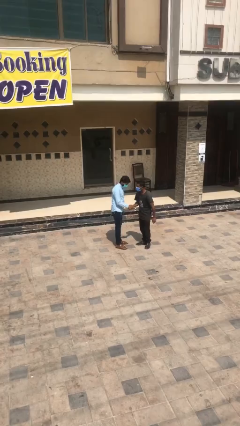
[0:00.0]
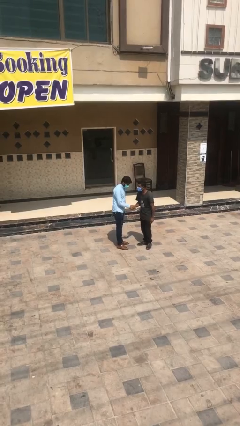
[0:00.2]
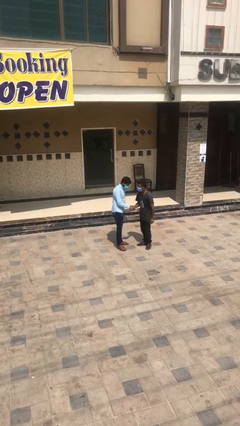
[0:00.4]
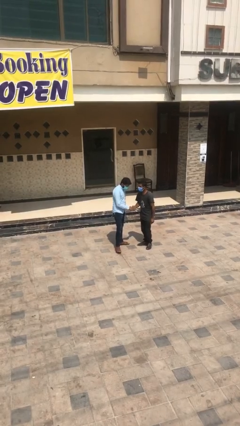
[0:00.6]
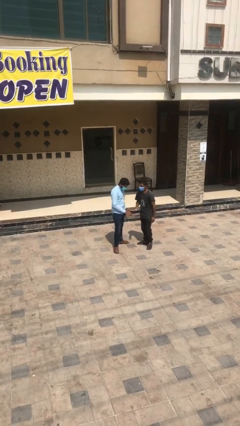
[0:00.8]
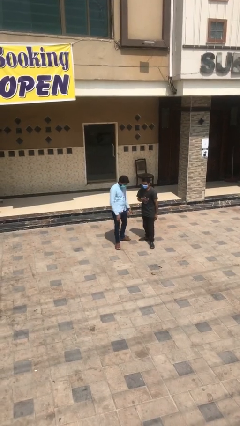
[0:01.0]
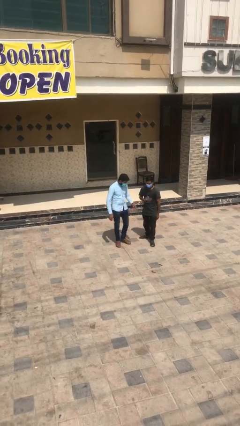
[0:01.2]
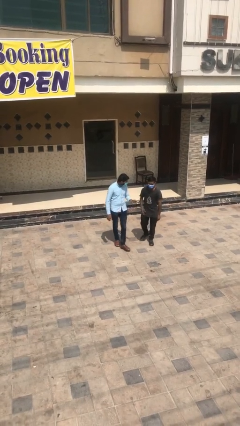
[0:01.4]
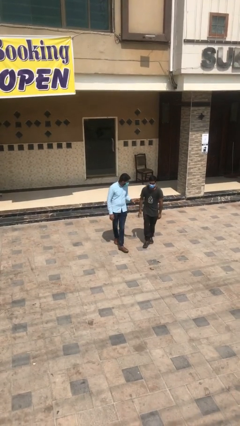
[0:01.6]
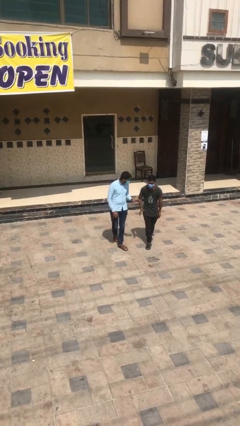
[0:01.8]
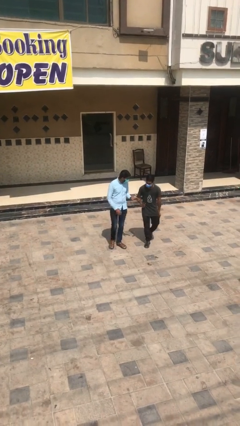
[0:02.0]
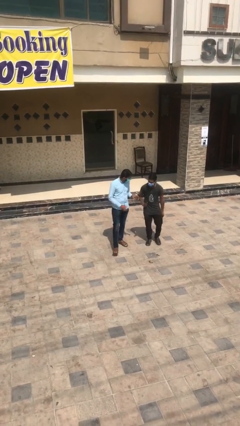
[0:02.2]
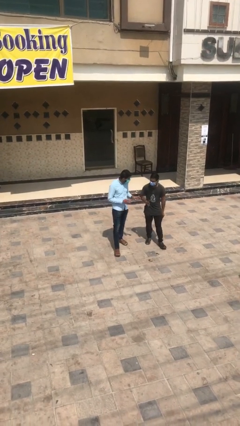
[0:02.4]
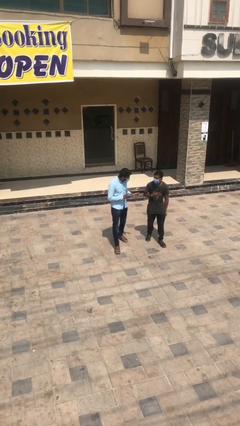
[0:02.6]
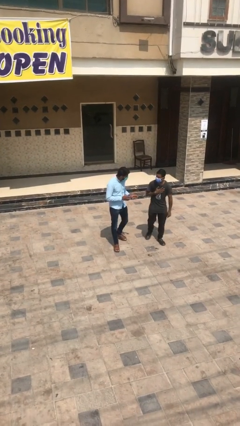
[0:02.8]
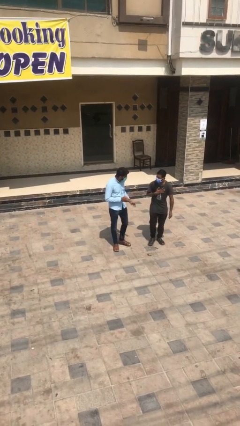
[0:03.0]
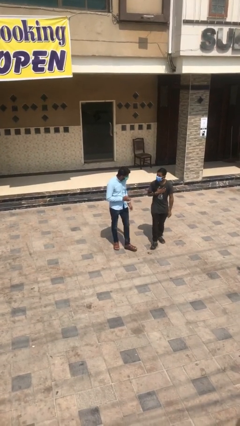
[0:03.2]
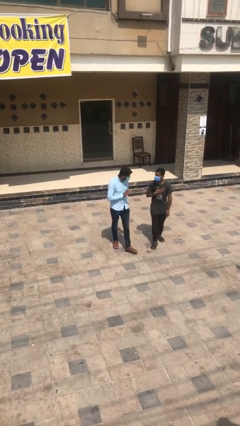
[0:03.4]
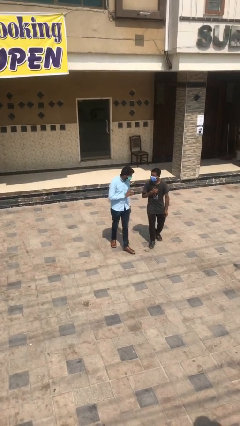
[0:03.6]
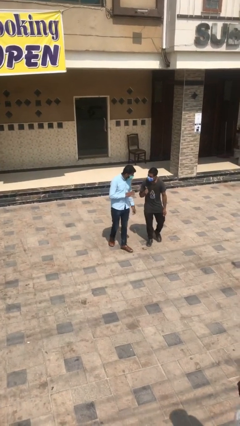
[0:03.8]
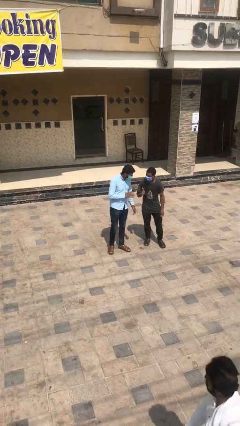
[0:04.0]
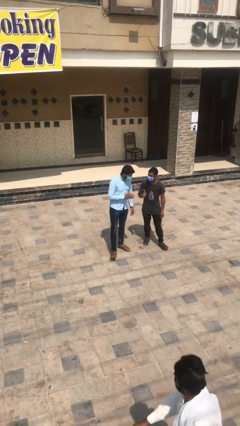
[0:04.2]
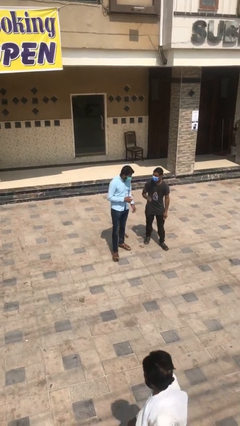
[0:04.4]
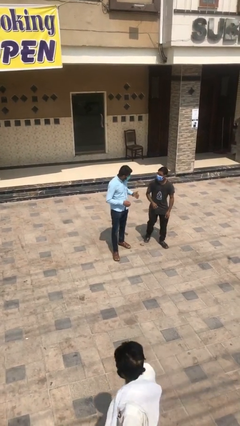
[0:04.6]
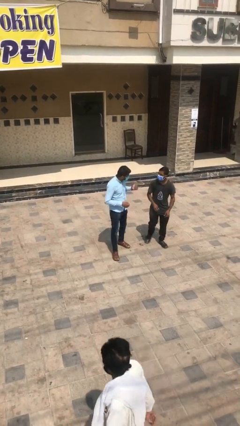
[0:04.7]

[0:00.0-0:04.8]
person talks to person

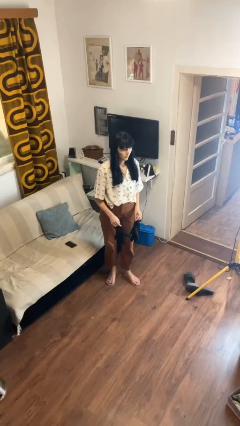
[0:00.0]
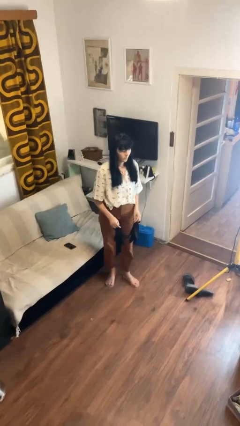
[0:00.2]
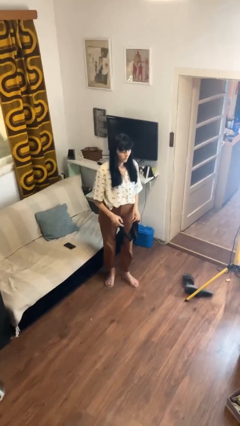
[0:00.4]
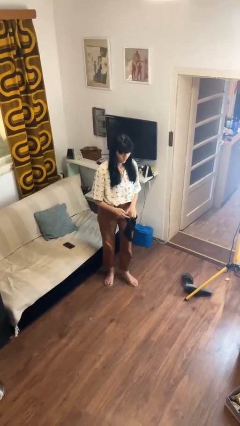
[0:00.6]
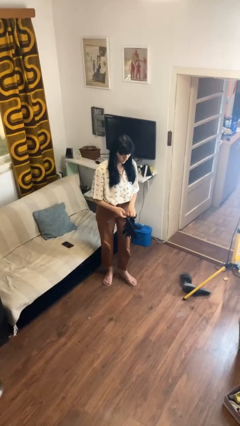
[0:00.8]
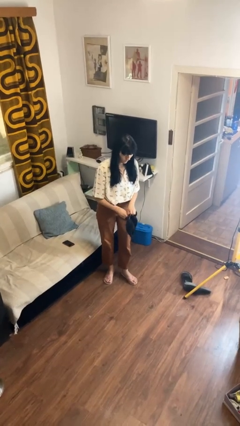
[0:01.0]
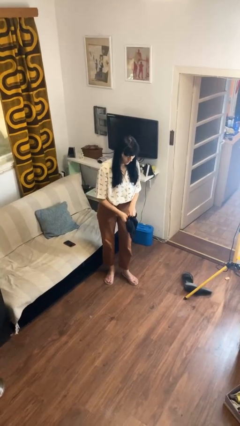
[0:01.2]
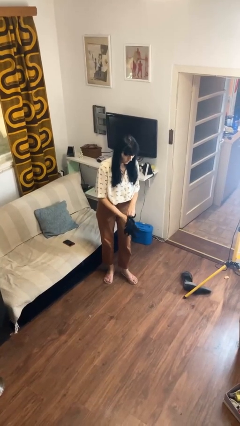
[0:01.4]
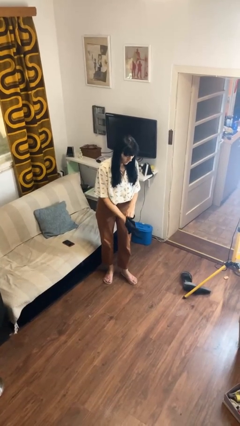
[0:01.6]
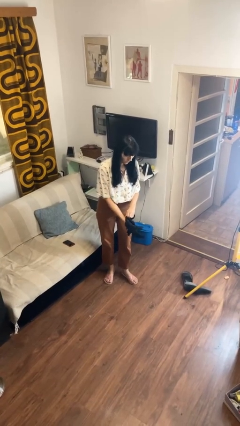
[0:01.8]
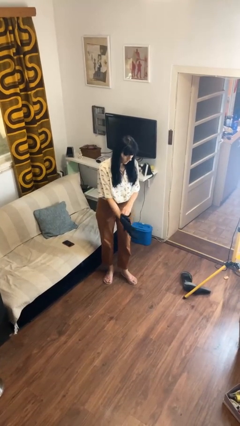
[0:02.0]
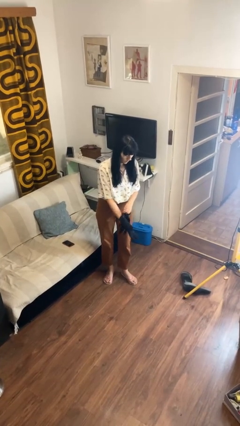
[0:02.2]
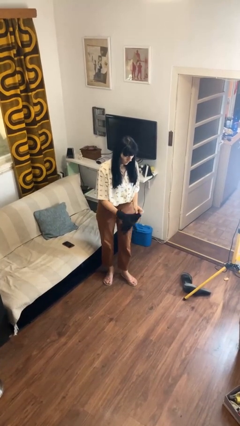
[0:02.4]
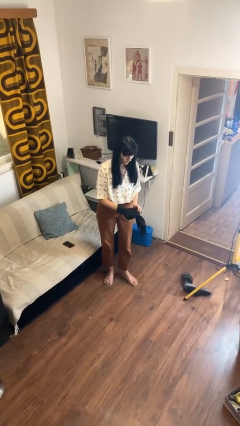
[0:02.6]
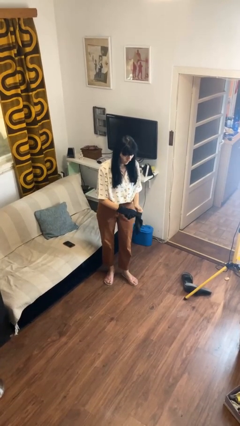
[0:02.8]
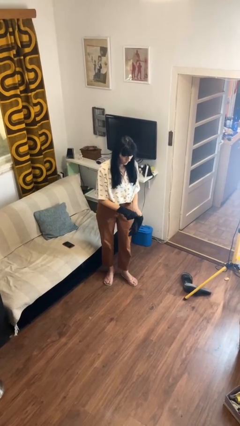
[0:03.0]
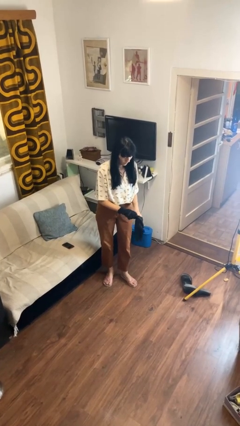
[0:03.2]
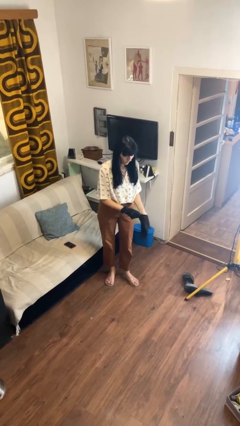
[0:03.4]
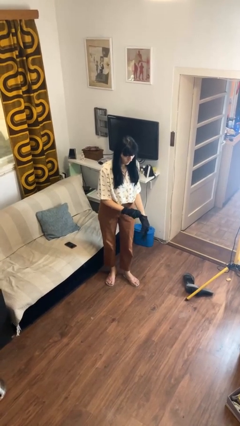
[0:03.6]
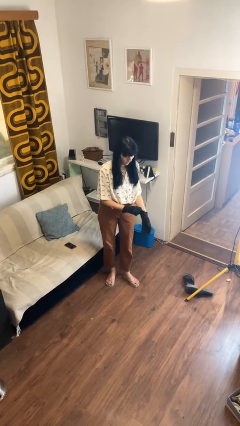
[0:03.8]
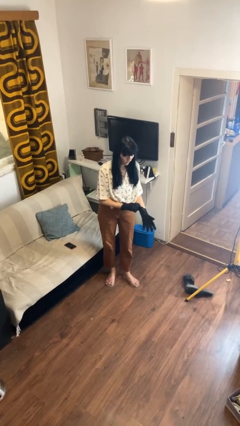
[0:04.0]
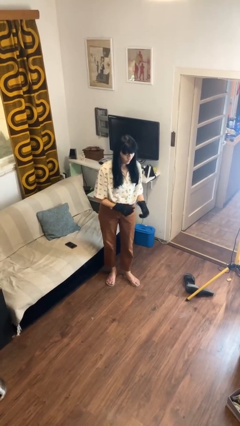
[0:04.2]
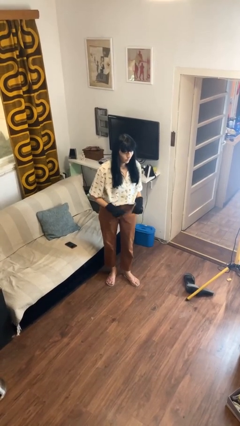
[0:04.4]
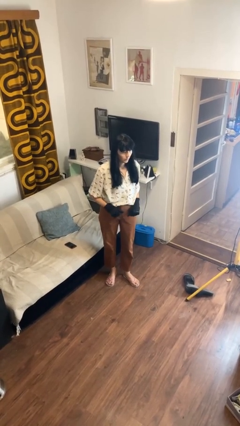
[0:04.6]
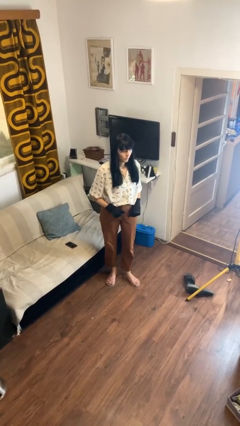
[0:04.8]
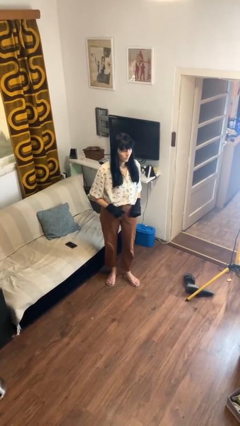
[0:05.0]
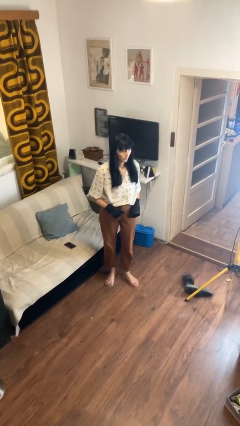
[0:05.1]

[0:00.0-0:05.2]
person puts on gloves

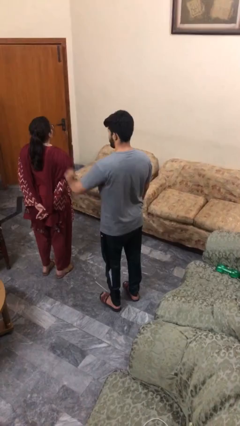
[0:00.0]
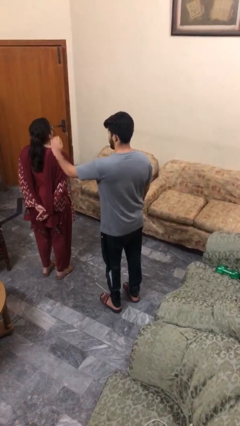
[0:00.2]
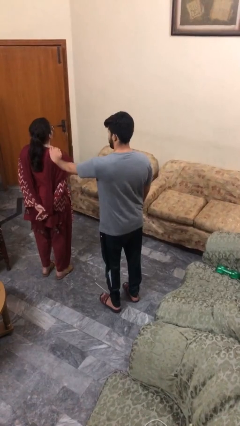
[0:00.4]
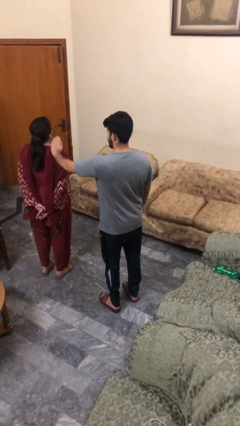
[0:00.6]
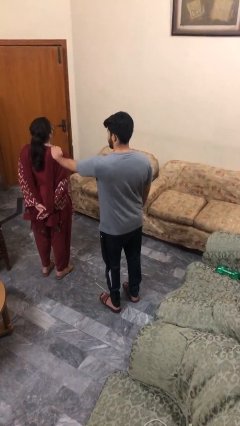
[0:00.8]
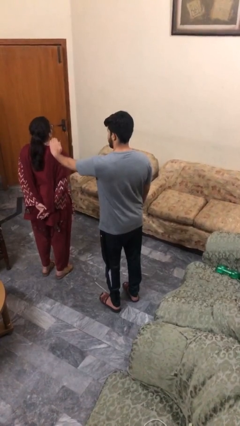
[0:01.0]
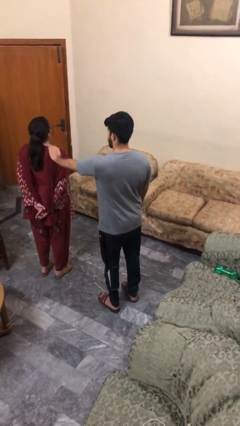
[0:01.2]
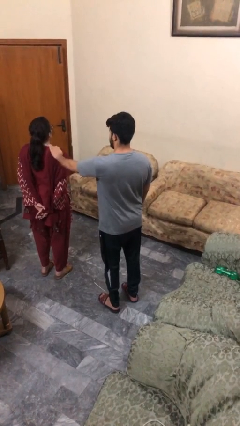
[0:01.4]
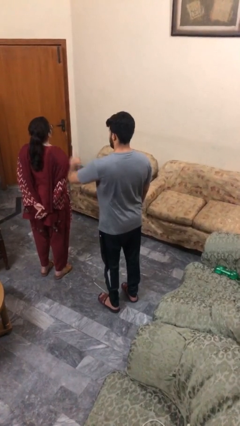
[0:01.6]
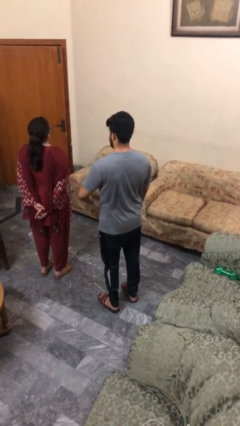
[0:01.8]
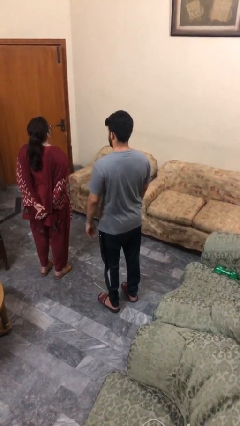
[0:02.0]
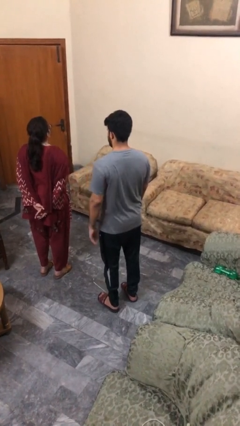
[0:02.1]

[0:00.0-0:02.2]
person pounds shoulders of person

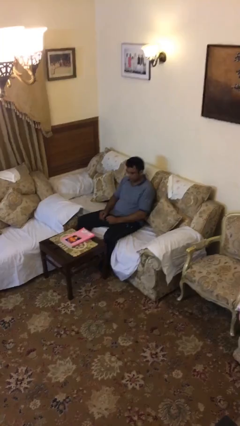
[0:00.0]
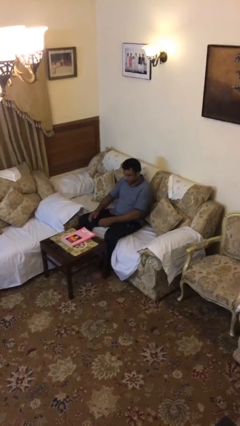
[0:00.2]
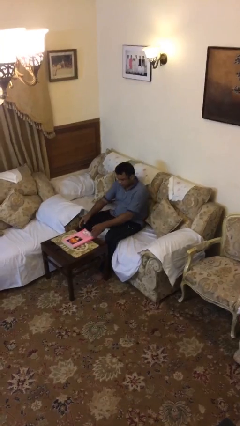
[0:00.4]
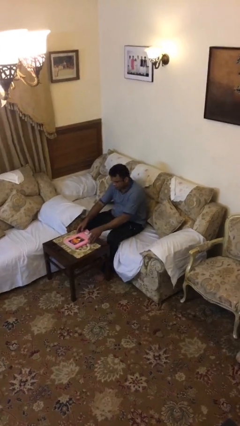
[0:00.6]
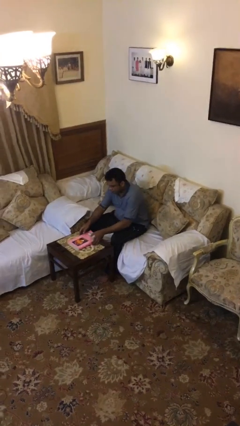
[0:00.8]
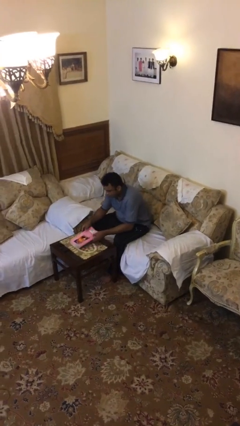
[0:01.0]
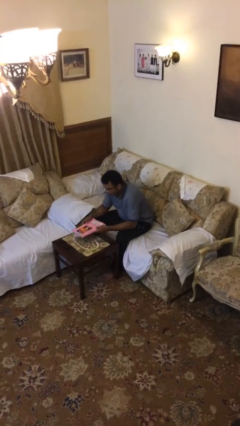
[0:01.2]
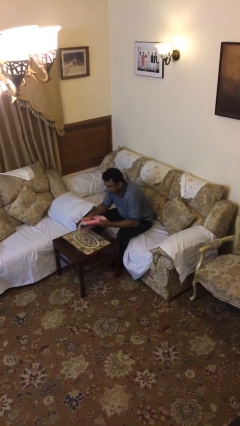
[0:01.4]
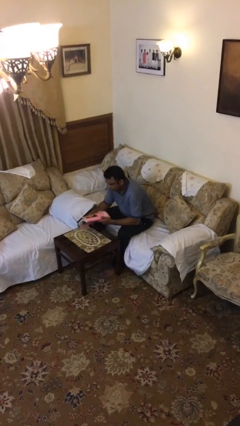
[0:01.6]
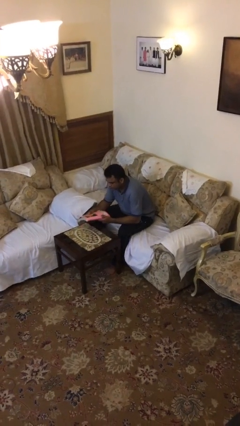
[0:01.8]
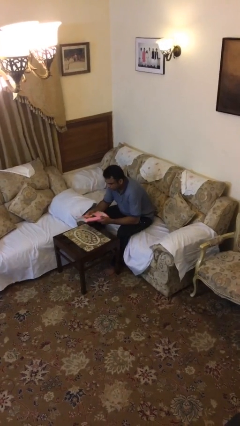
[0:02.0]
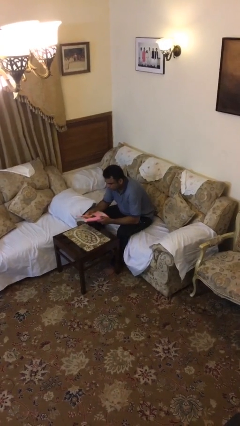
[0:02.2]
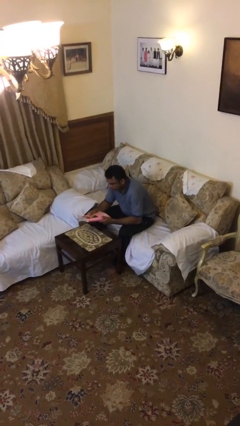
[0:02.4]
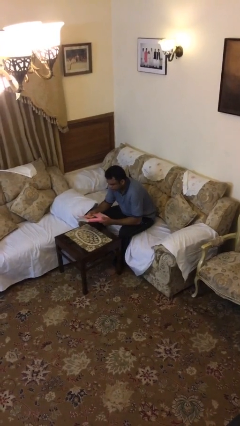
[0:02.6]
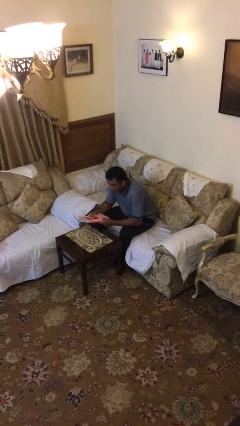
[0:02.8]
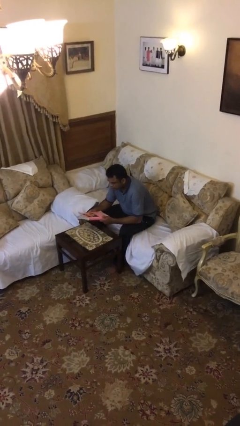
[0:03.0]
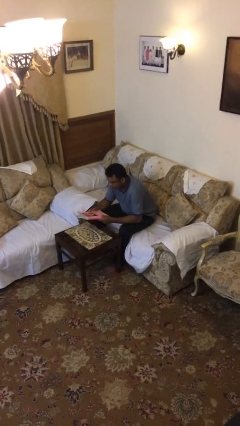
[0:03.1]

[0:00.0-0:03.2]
person picks up object from table

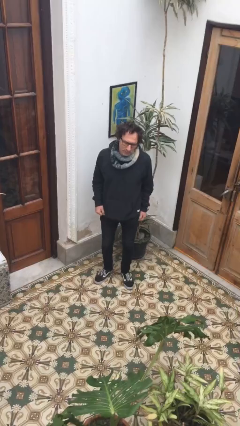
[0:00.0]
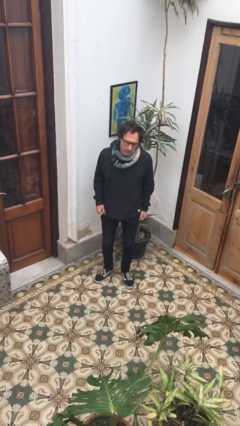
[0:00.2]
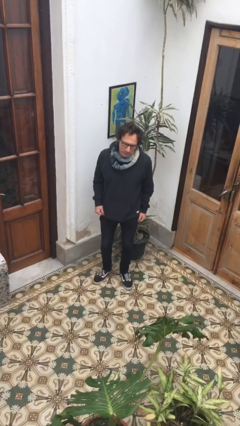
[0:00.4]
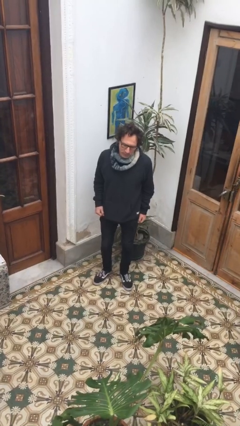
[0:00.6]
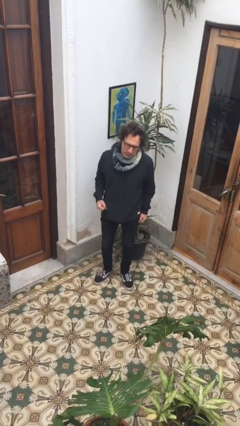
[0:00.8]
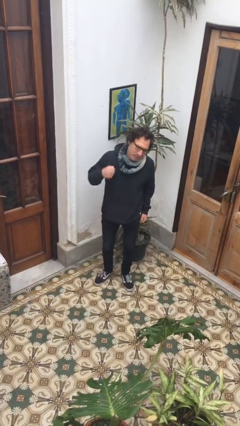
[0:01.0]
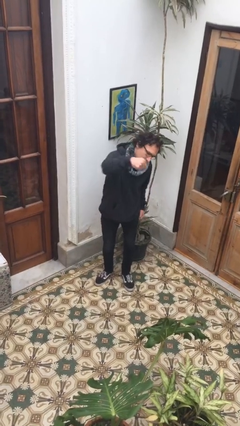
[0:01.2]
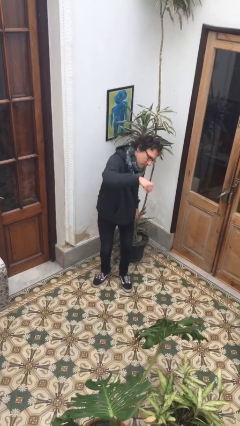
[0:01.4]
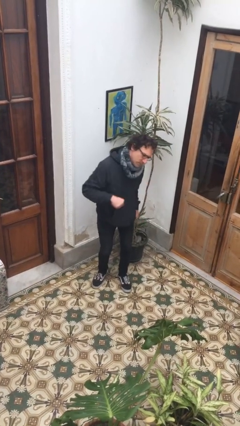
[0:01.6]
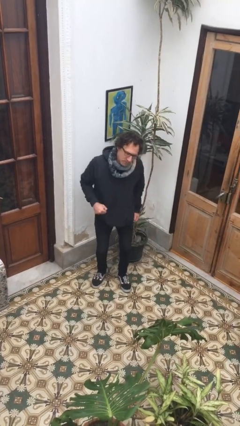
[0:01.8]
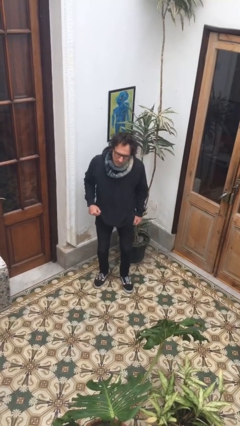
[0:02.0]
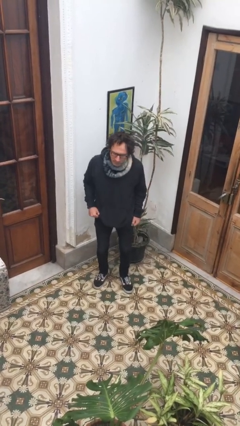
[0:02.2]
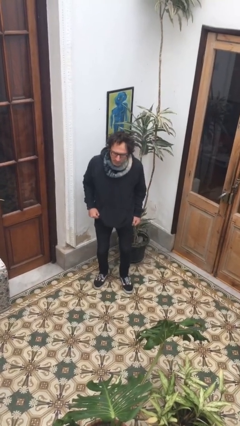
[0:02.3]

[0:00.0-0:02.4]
person karate chop
